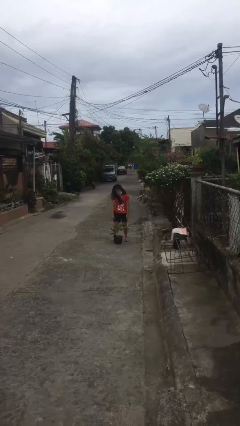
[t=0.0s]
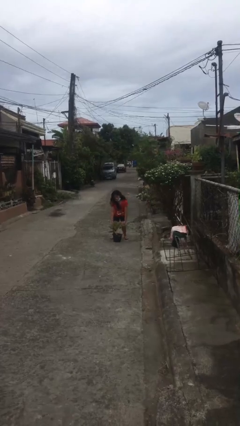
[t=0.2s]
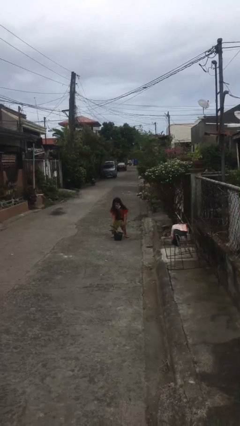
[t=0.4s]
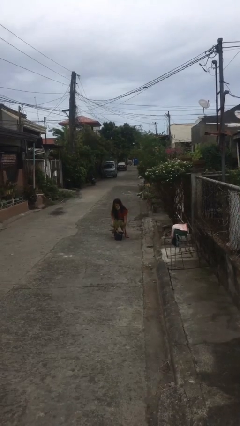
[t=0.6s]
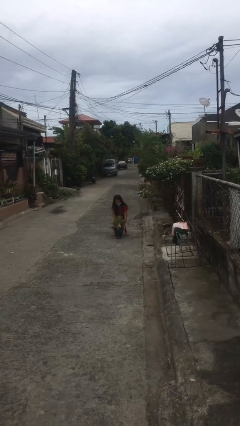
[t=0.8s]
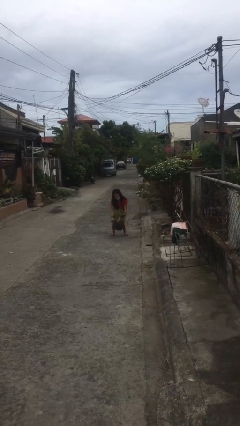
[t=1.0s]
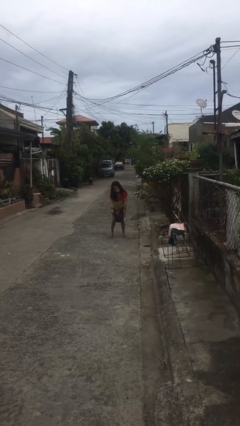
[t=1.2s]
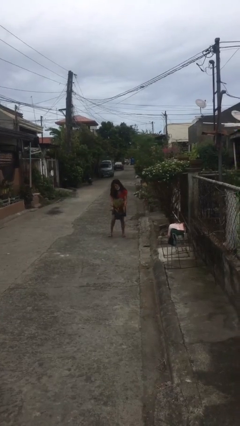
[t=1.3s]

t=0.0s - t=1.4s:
person picks up object from floor

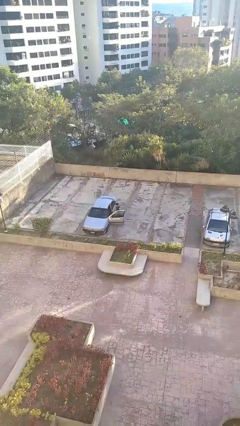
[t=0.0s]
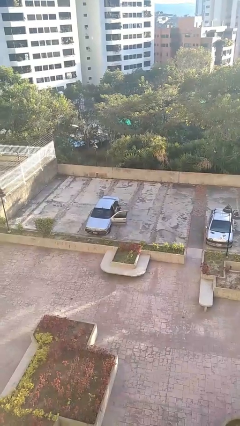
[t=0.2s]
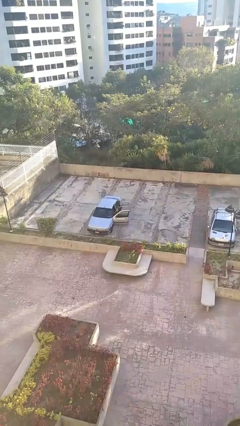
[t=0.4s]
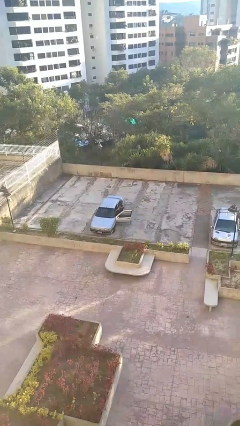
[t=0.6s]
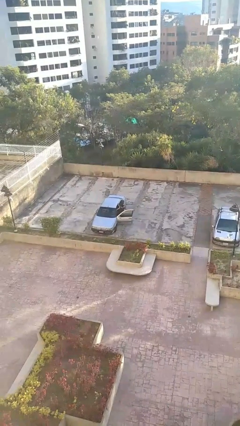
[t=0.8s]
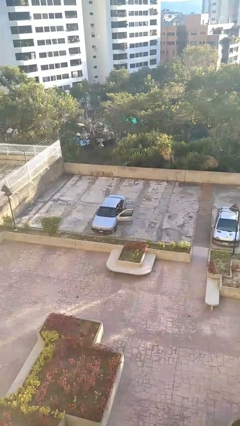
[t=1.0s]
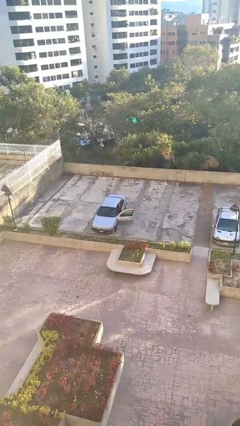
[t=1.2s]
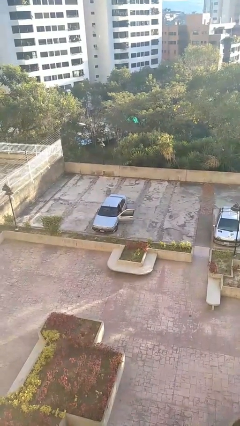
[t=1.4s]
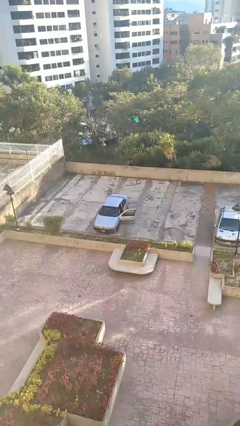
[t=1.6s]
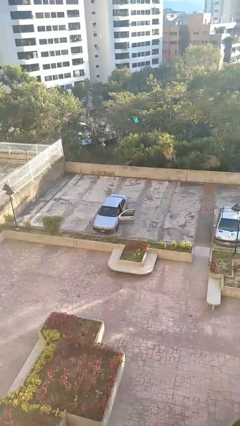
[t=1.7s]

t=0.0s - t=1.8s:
person enters car

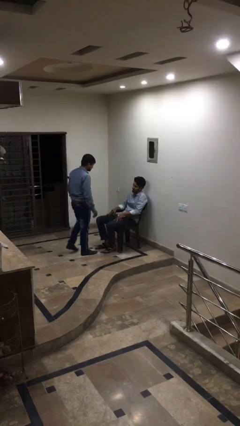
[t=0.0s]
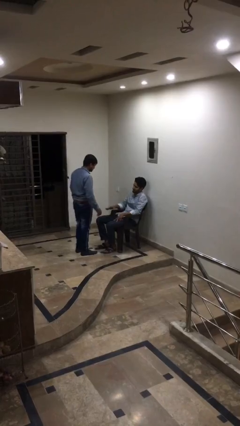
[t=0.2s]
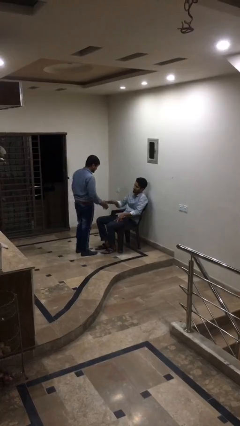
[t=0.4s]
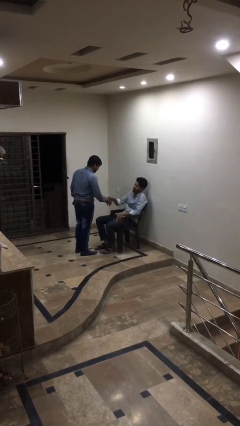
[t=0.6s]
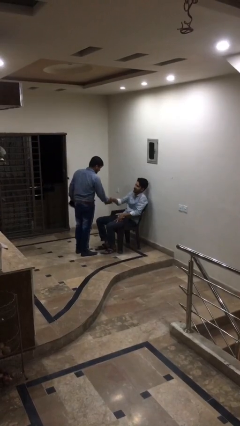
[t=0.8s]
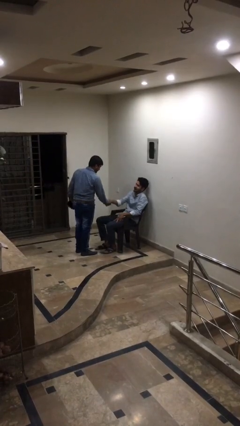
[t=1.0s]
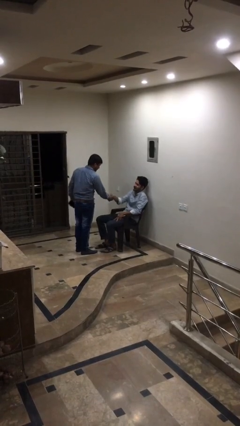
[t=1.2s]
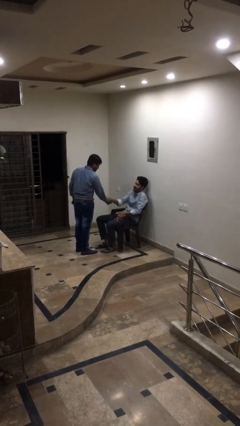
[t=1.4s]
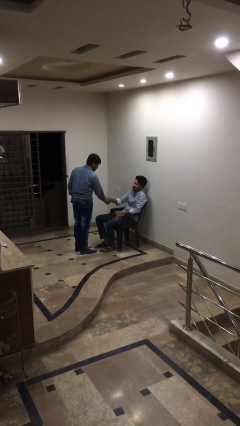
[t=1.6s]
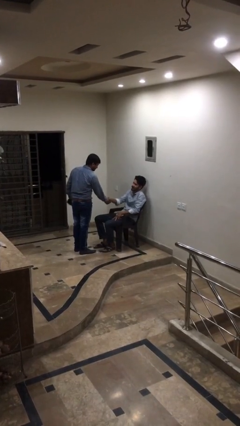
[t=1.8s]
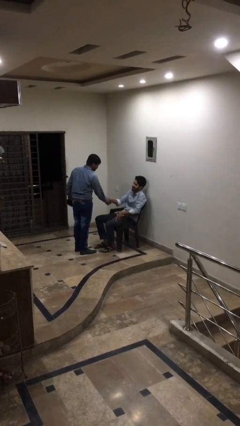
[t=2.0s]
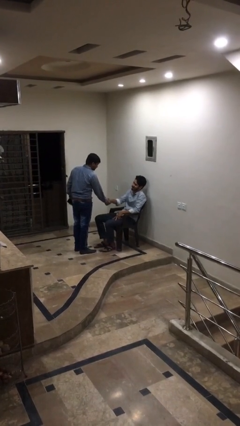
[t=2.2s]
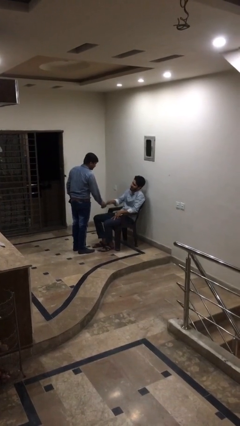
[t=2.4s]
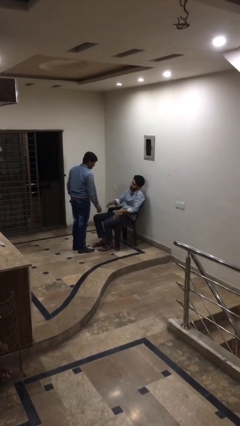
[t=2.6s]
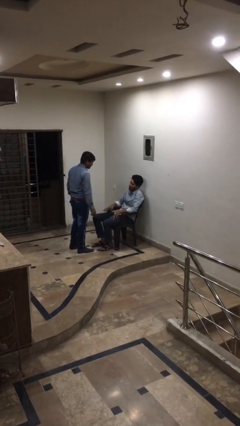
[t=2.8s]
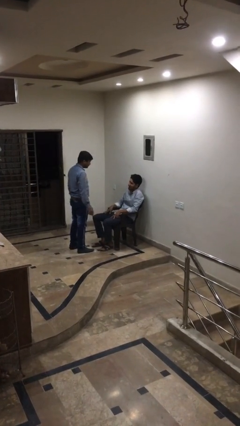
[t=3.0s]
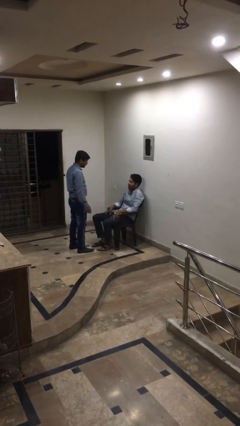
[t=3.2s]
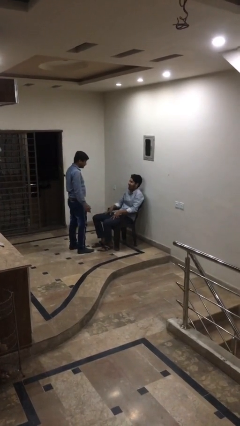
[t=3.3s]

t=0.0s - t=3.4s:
person shakes hand

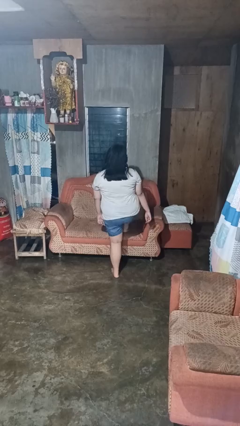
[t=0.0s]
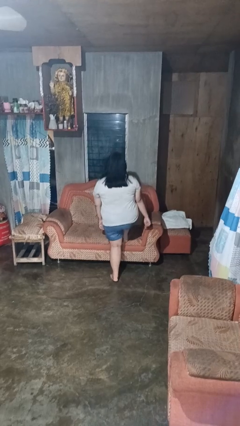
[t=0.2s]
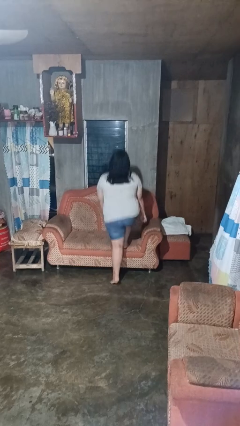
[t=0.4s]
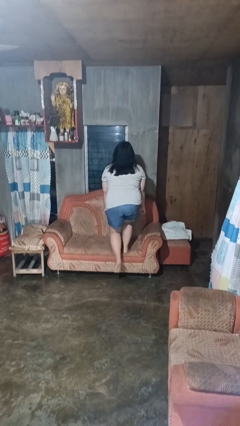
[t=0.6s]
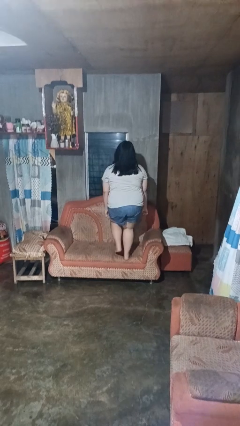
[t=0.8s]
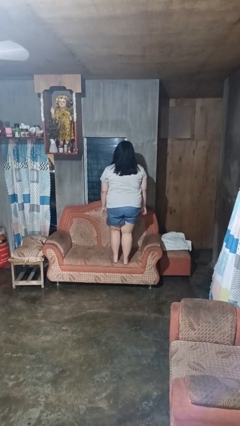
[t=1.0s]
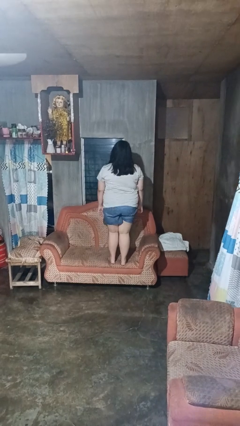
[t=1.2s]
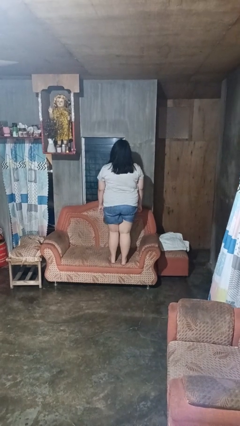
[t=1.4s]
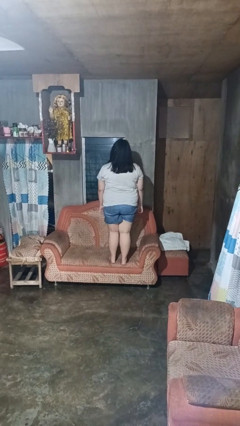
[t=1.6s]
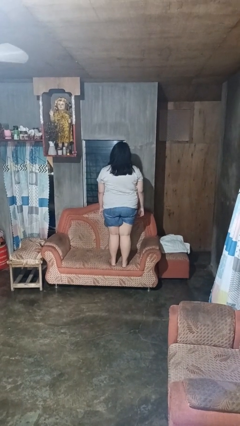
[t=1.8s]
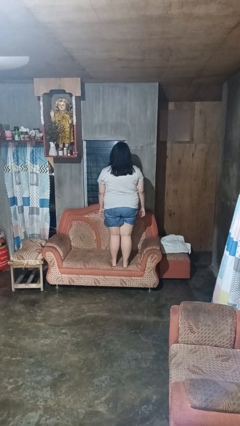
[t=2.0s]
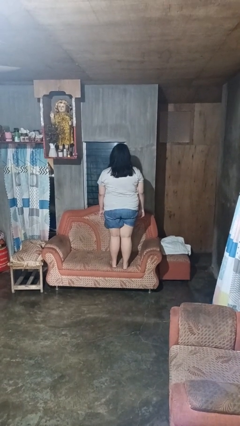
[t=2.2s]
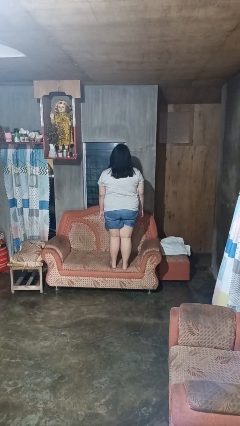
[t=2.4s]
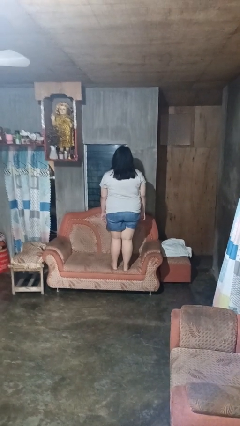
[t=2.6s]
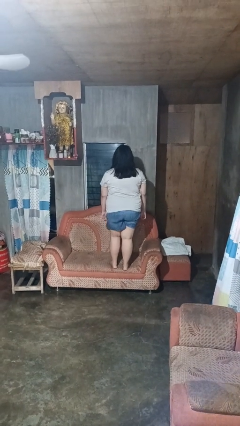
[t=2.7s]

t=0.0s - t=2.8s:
person climbs on couch

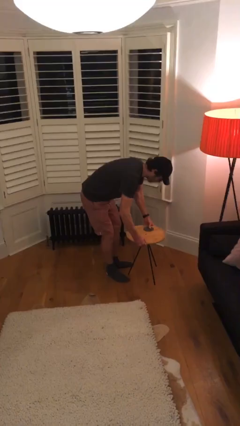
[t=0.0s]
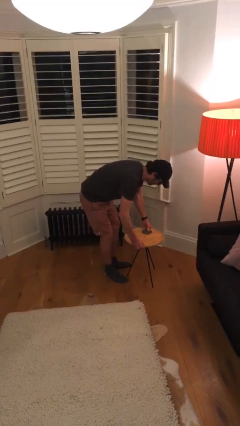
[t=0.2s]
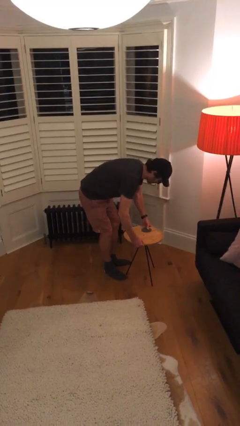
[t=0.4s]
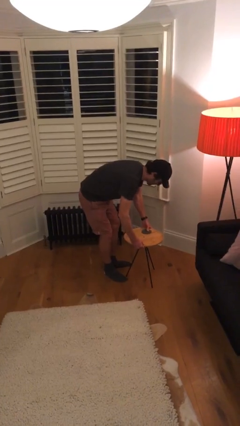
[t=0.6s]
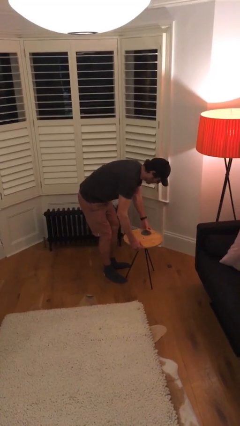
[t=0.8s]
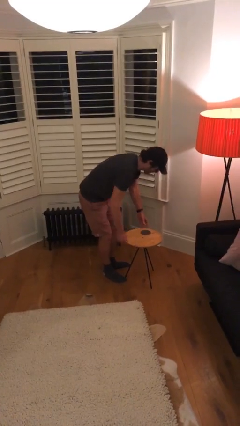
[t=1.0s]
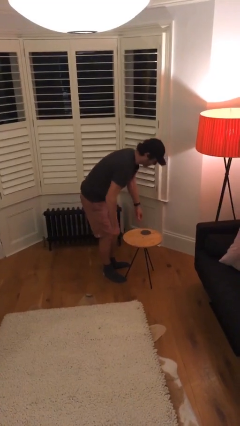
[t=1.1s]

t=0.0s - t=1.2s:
person puts down object on floor

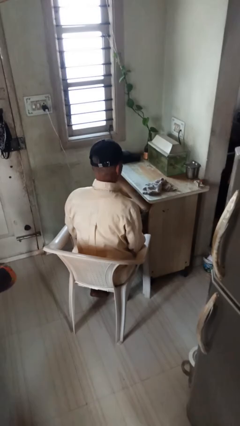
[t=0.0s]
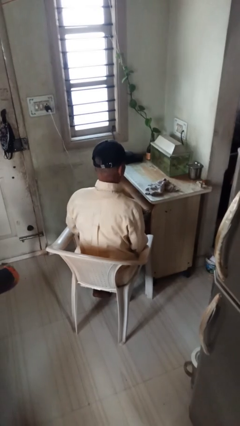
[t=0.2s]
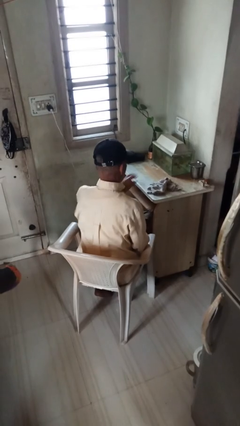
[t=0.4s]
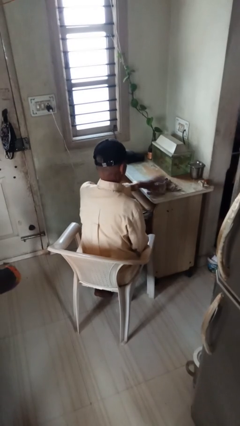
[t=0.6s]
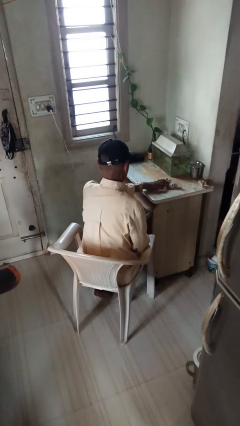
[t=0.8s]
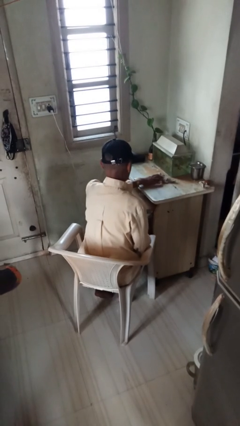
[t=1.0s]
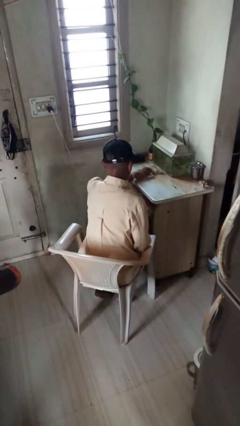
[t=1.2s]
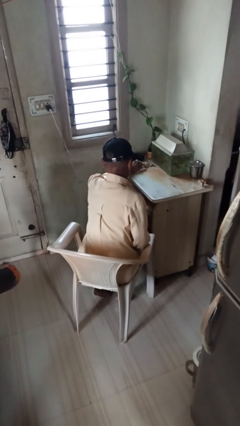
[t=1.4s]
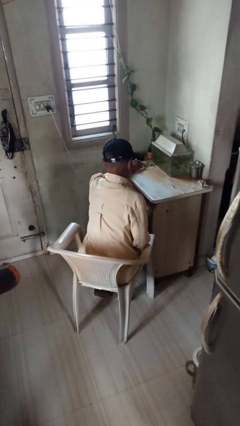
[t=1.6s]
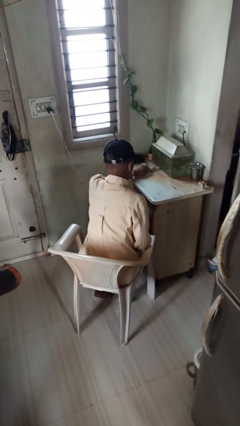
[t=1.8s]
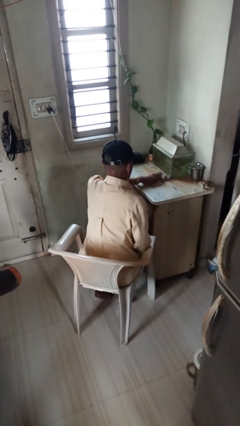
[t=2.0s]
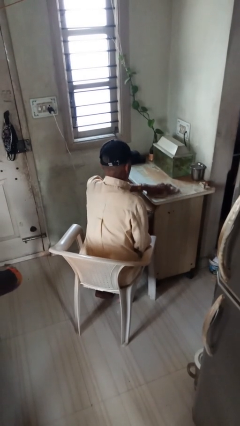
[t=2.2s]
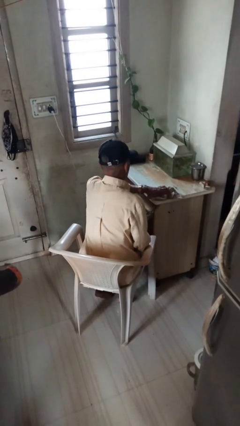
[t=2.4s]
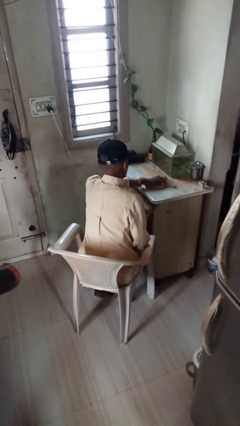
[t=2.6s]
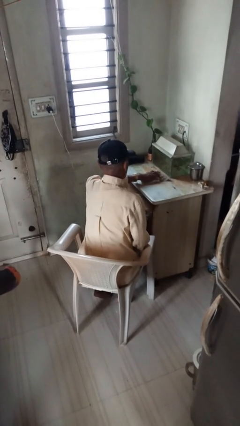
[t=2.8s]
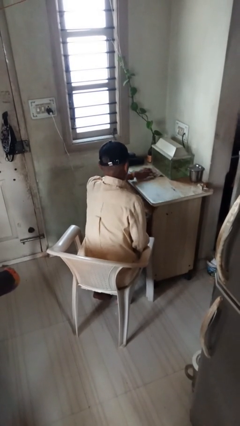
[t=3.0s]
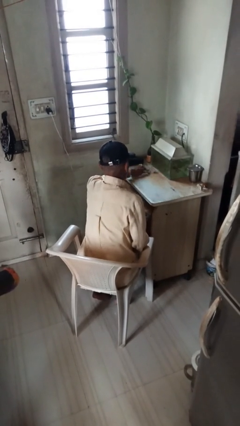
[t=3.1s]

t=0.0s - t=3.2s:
person cleans table with rag

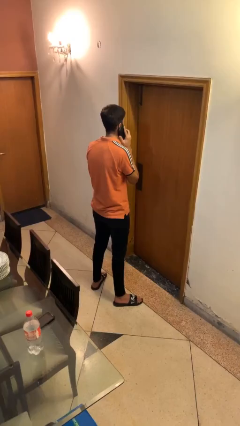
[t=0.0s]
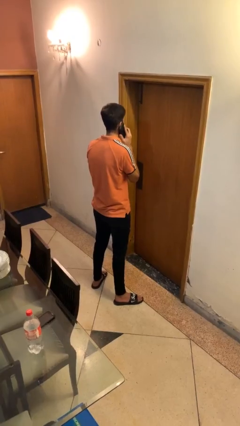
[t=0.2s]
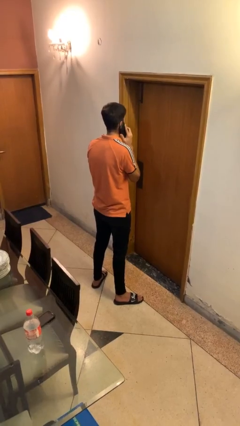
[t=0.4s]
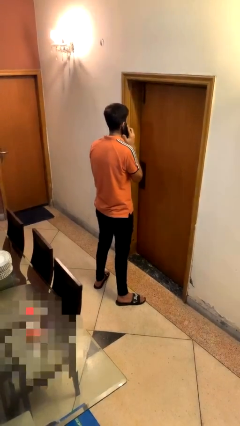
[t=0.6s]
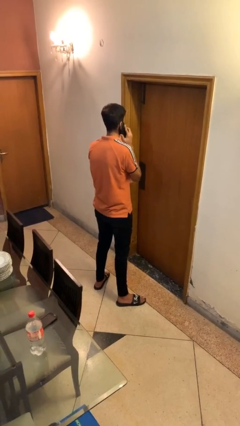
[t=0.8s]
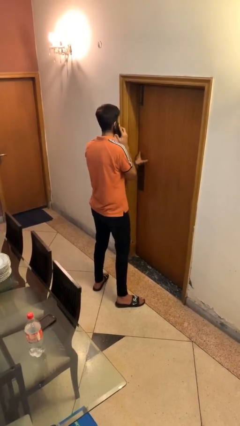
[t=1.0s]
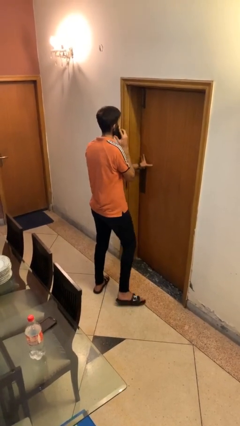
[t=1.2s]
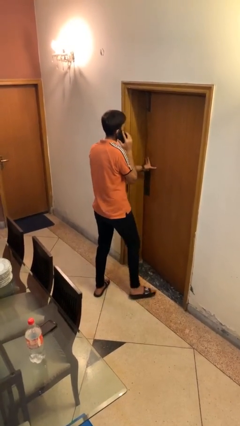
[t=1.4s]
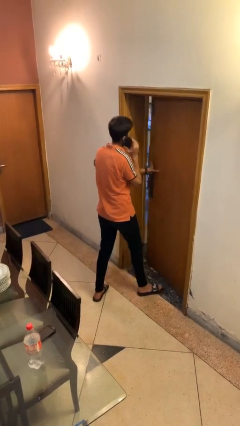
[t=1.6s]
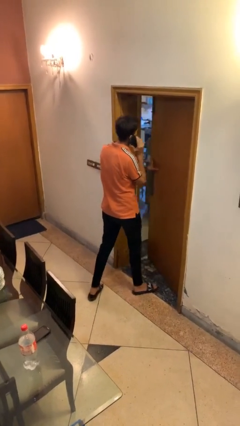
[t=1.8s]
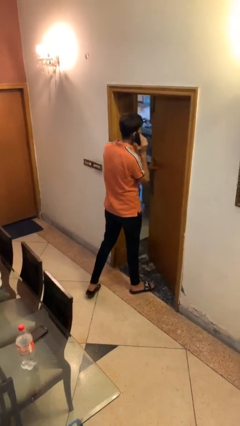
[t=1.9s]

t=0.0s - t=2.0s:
person opens facility door

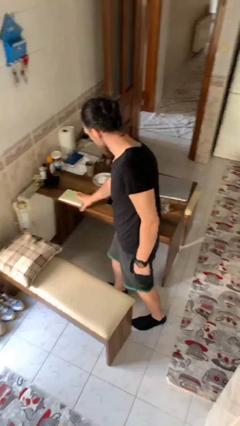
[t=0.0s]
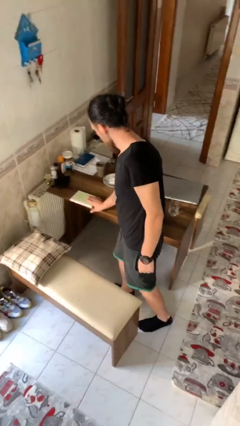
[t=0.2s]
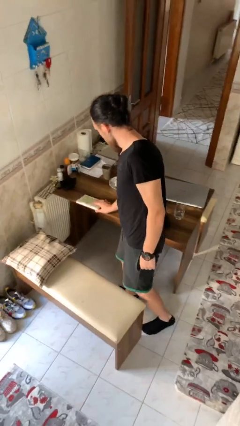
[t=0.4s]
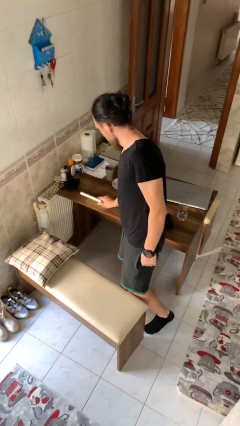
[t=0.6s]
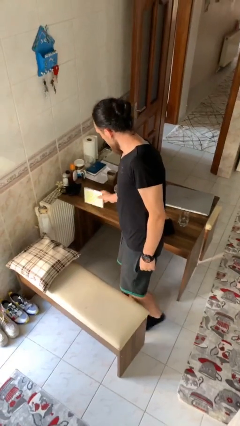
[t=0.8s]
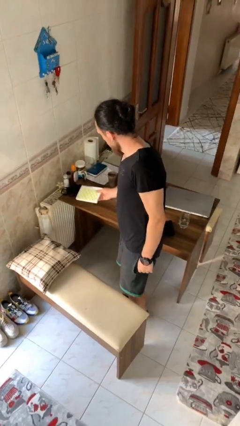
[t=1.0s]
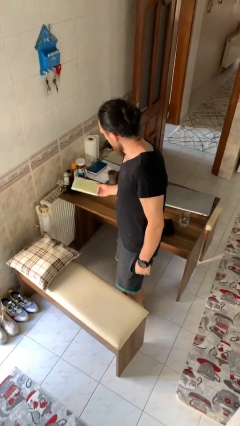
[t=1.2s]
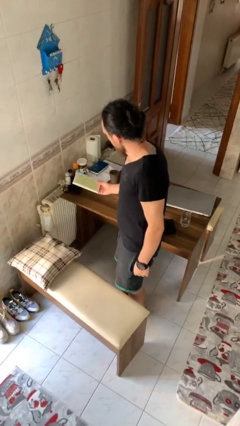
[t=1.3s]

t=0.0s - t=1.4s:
person picks up object from table
